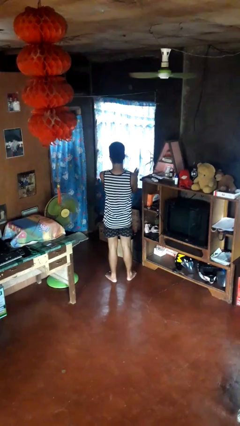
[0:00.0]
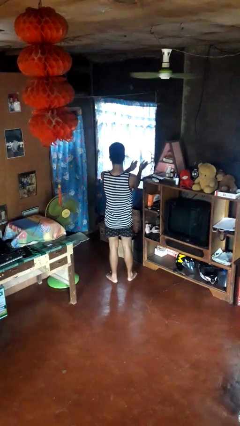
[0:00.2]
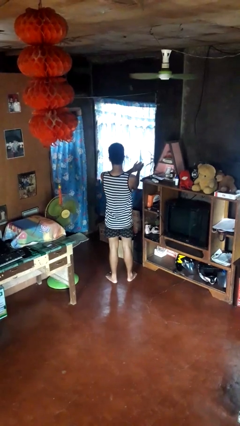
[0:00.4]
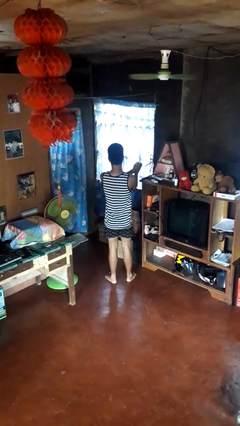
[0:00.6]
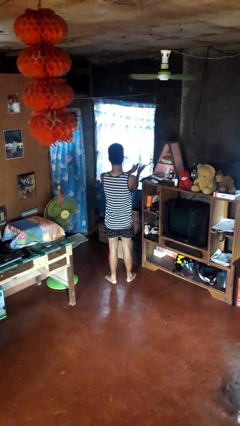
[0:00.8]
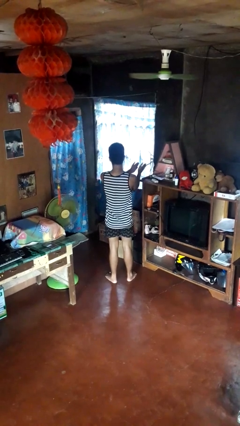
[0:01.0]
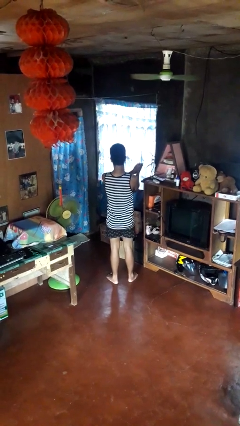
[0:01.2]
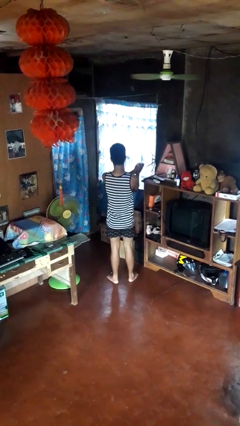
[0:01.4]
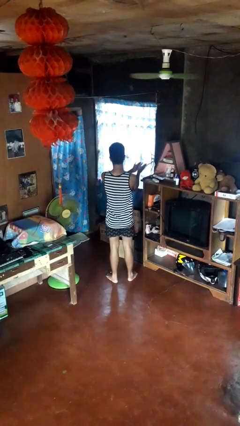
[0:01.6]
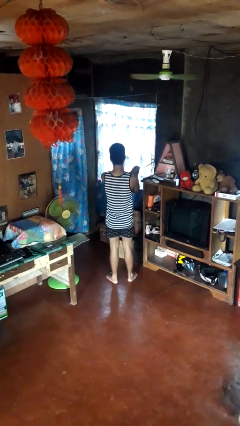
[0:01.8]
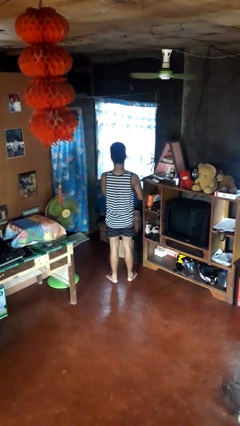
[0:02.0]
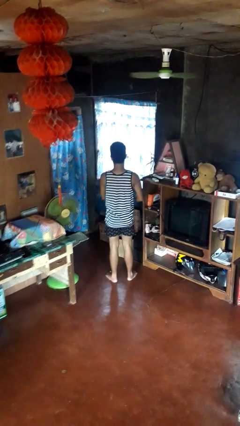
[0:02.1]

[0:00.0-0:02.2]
person claps hands

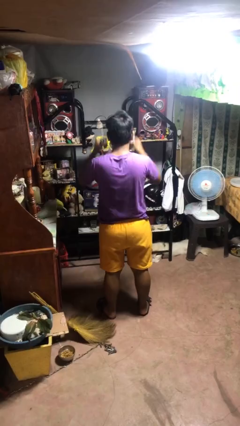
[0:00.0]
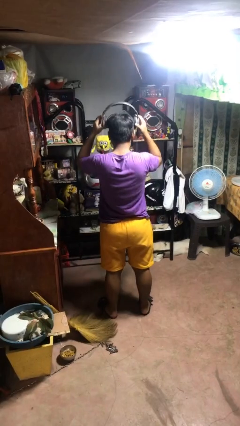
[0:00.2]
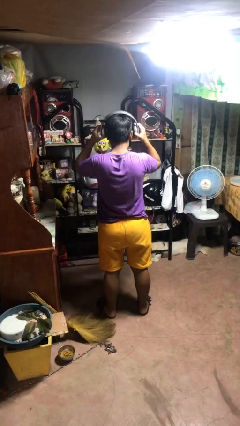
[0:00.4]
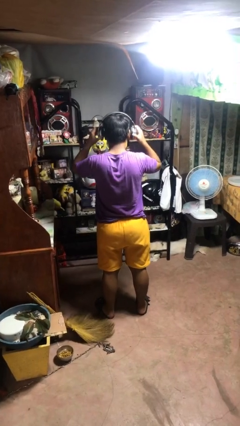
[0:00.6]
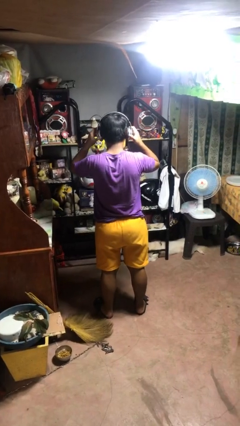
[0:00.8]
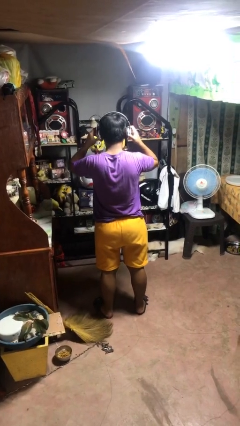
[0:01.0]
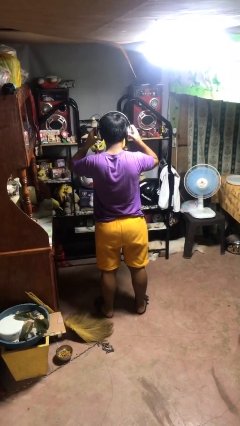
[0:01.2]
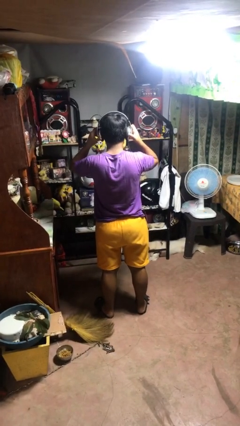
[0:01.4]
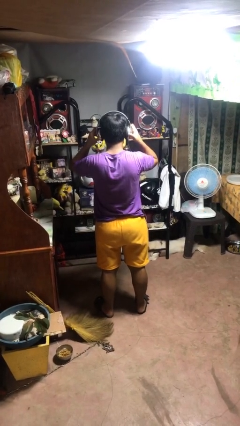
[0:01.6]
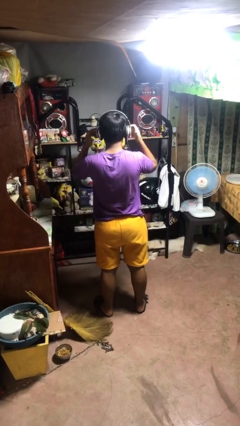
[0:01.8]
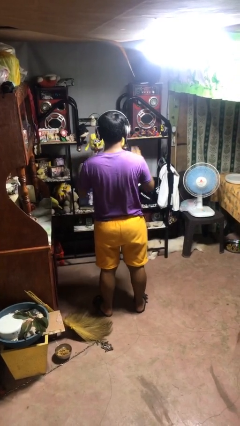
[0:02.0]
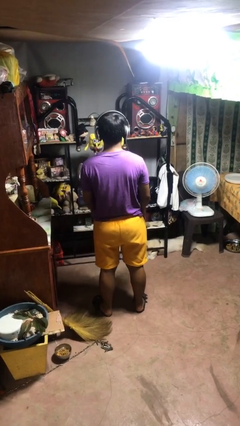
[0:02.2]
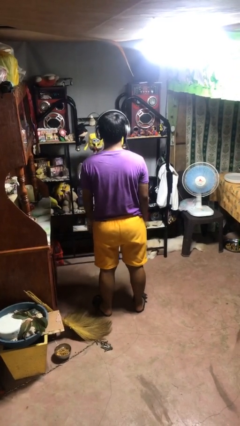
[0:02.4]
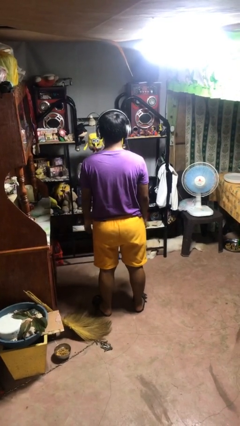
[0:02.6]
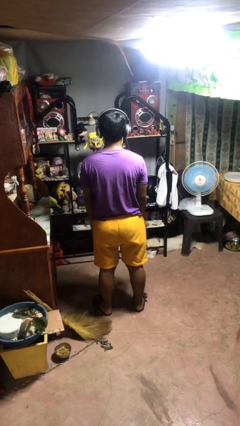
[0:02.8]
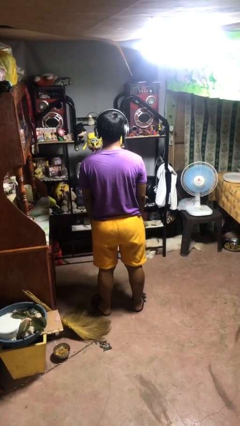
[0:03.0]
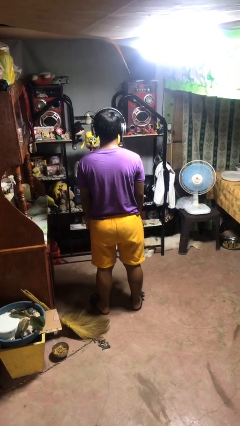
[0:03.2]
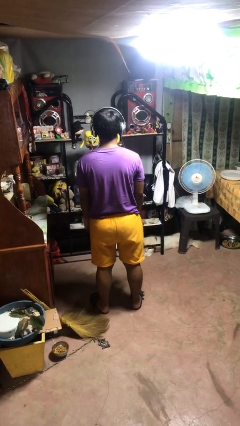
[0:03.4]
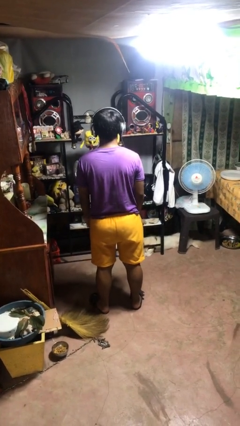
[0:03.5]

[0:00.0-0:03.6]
person puts on headphones

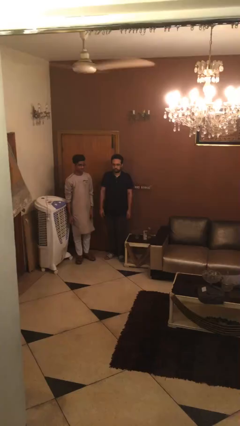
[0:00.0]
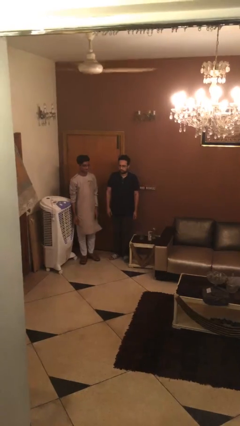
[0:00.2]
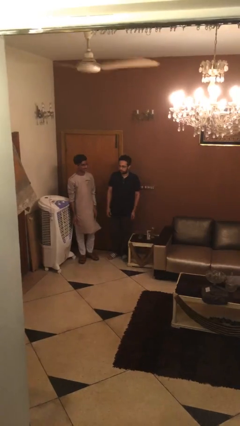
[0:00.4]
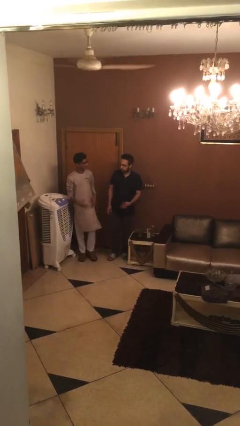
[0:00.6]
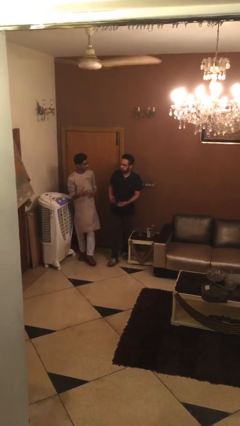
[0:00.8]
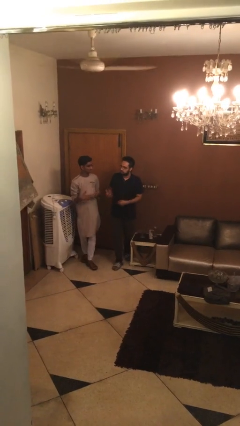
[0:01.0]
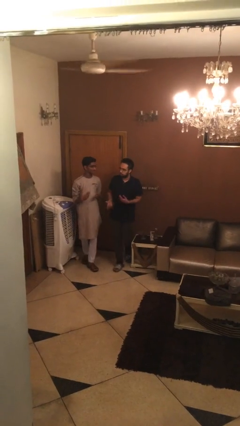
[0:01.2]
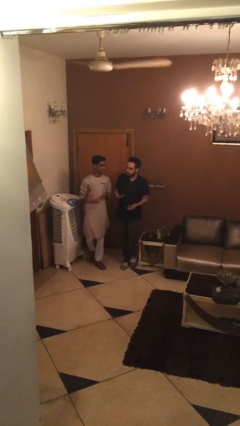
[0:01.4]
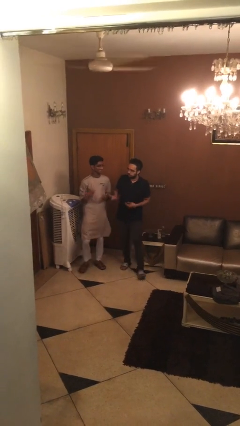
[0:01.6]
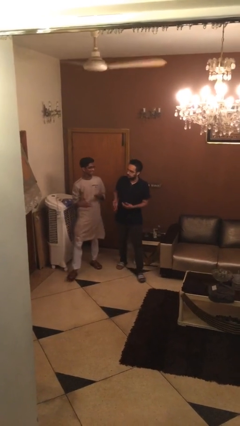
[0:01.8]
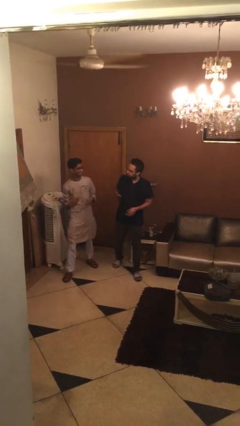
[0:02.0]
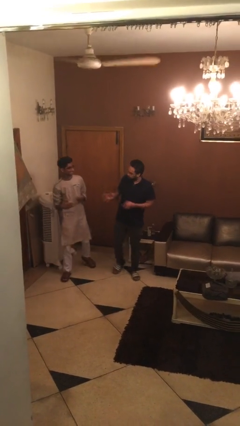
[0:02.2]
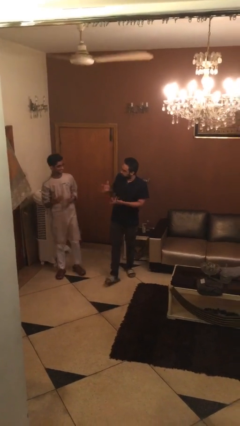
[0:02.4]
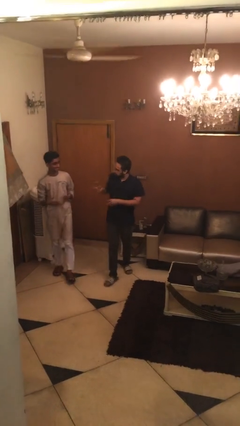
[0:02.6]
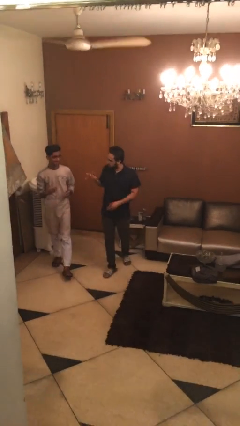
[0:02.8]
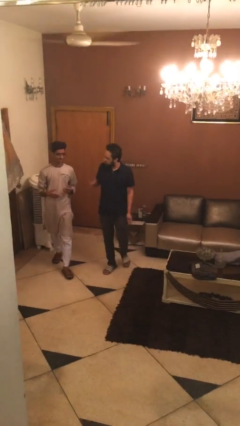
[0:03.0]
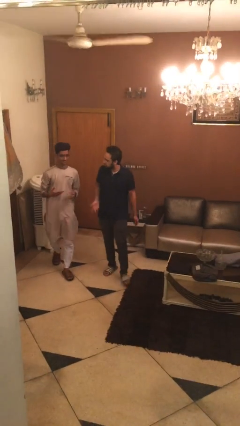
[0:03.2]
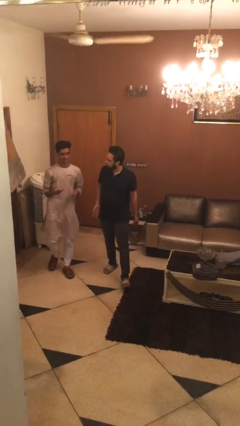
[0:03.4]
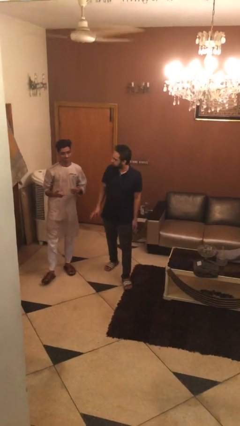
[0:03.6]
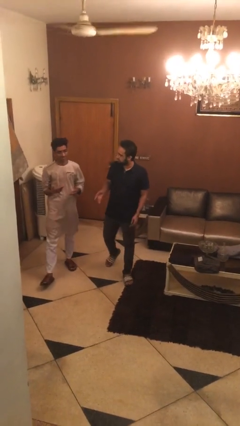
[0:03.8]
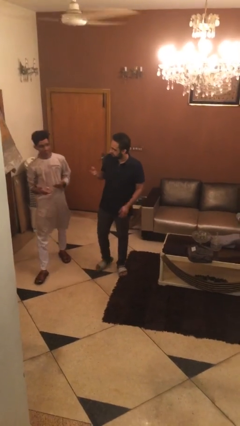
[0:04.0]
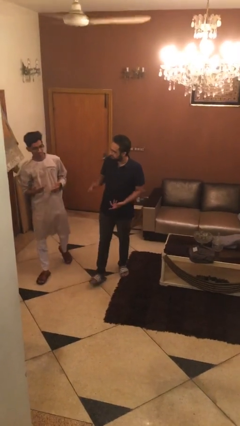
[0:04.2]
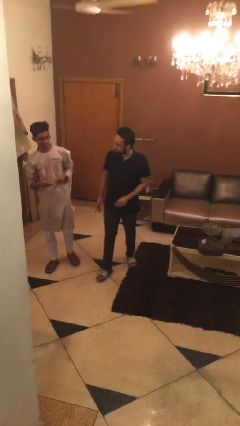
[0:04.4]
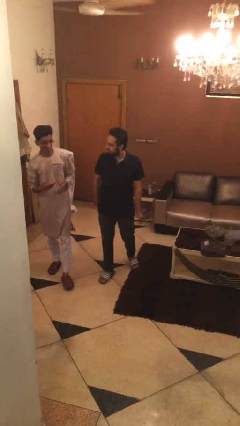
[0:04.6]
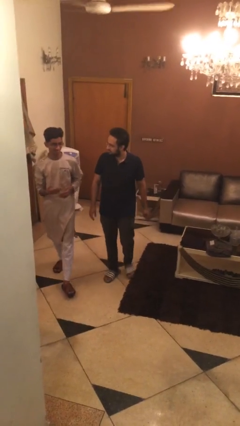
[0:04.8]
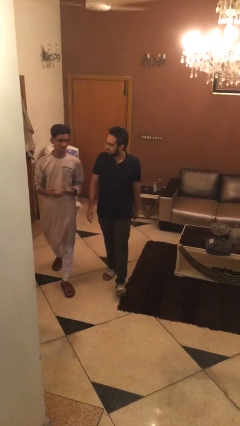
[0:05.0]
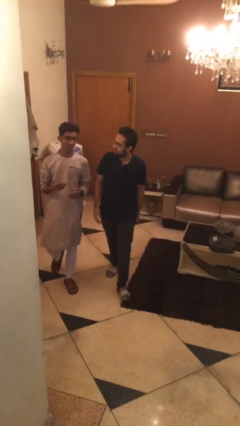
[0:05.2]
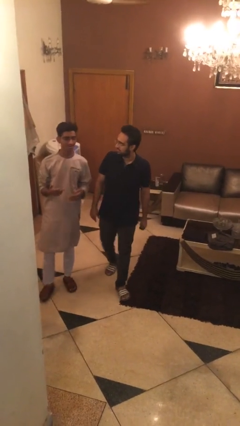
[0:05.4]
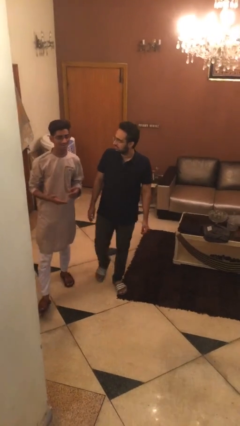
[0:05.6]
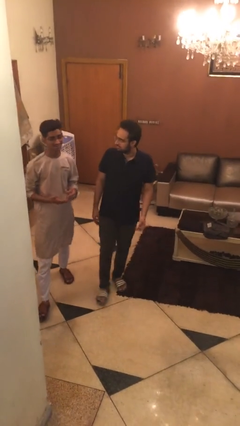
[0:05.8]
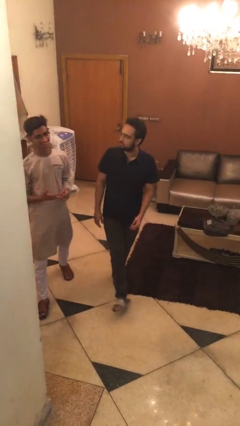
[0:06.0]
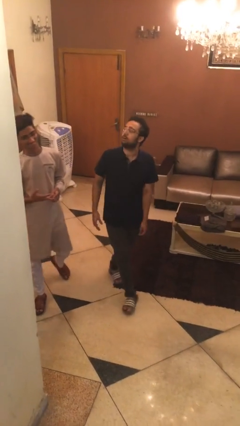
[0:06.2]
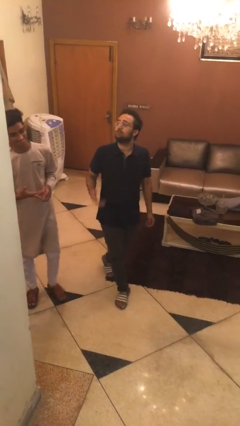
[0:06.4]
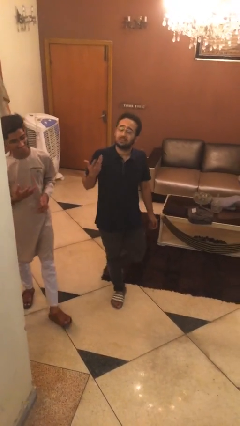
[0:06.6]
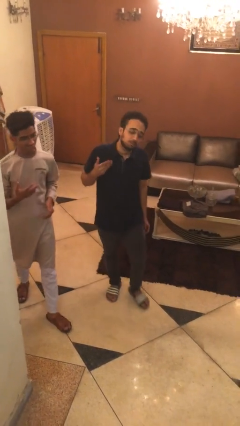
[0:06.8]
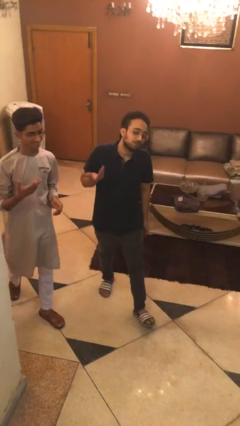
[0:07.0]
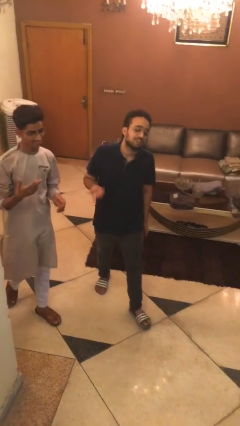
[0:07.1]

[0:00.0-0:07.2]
person talks to person

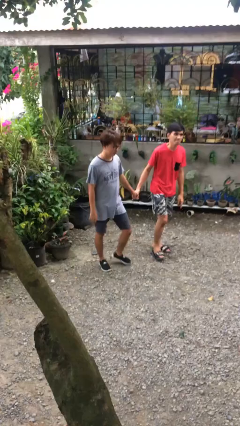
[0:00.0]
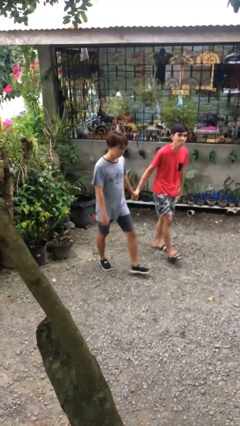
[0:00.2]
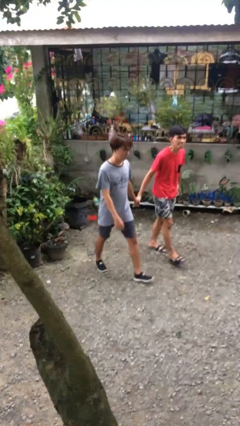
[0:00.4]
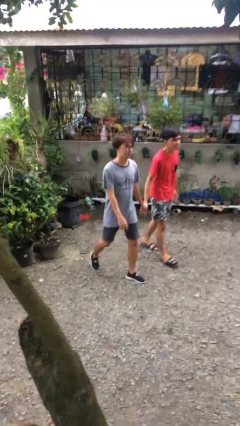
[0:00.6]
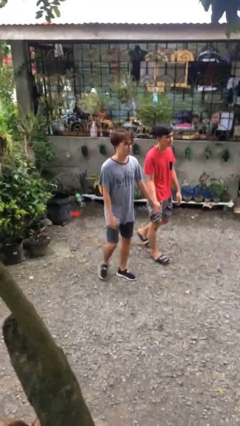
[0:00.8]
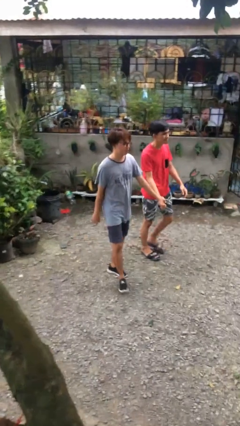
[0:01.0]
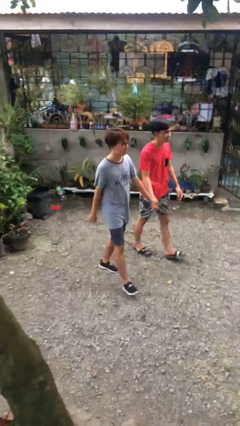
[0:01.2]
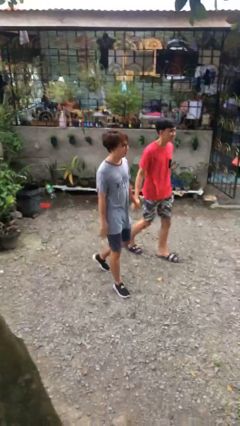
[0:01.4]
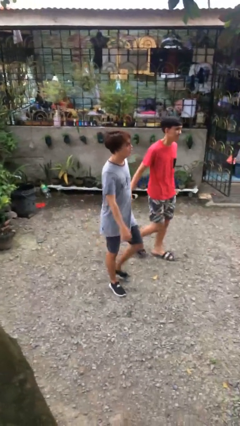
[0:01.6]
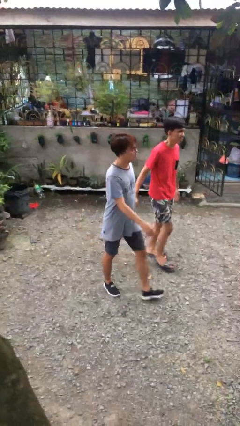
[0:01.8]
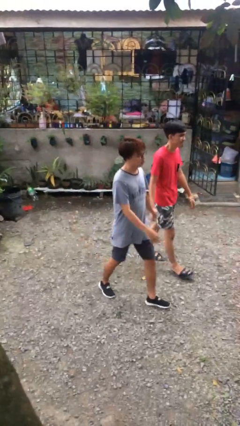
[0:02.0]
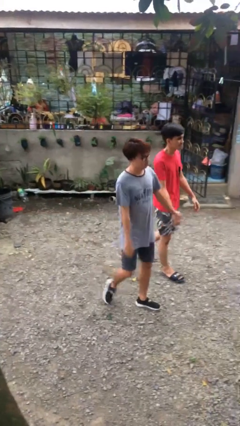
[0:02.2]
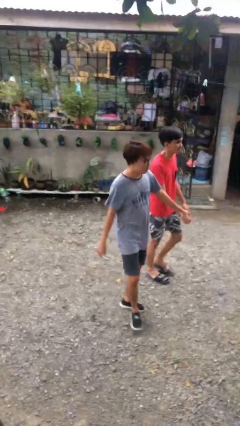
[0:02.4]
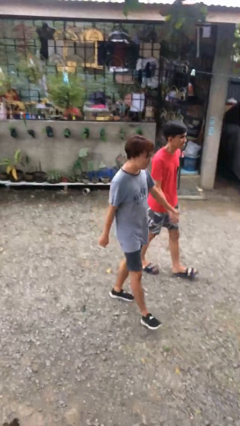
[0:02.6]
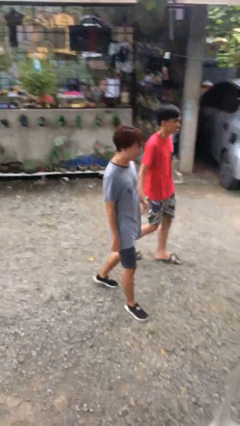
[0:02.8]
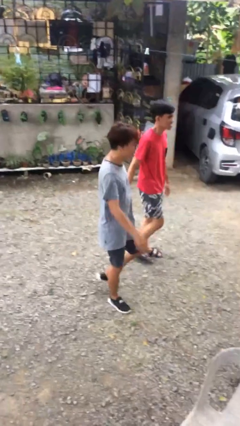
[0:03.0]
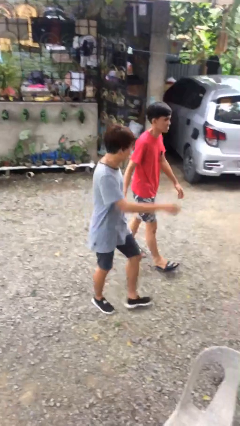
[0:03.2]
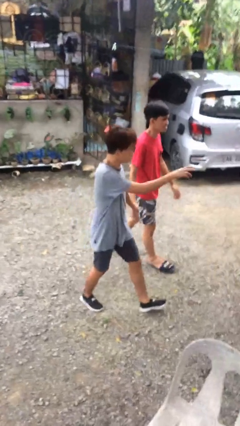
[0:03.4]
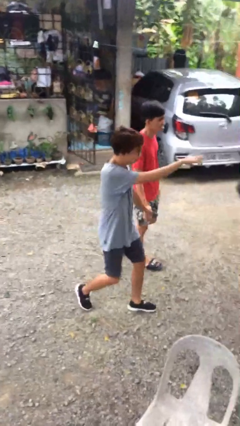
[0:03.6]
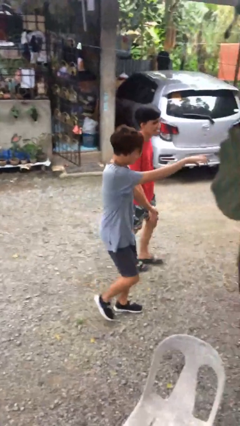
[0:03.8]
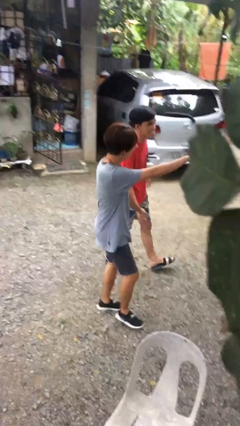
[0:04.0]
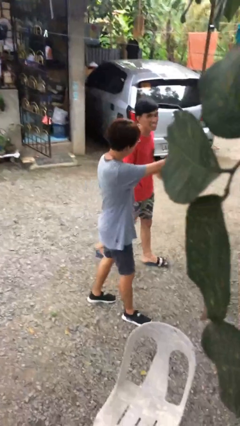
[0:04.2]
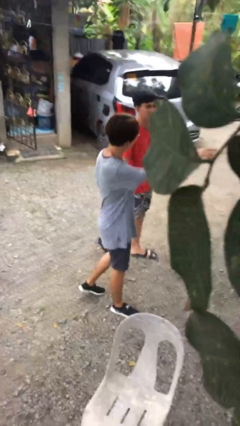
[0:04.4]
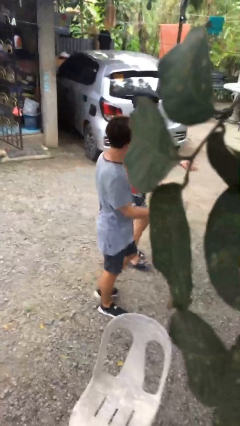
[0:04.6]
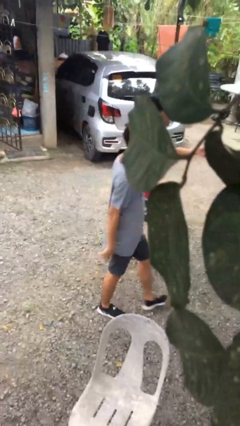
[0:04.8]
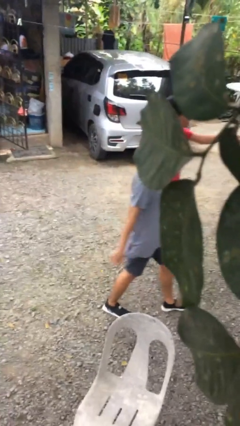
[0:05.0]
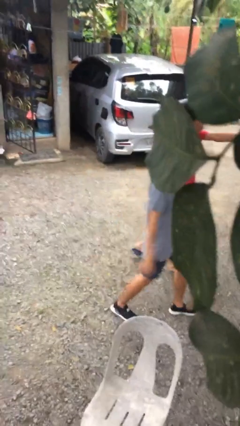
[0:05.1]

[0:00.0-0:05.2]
person holds hand
